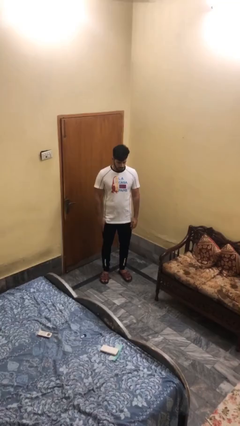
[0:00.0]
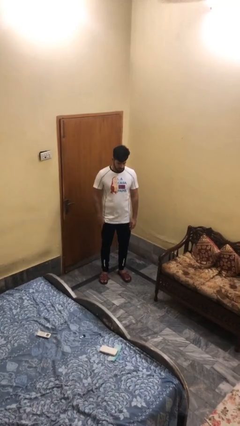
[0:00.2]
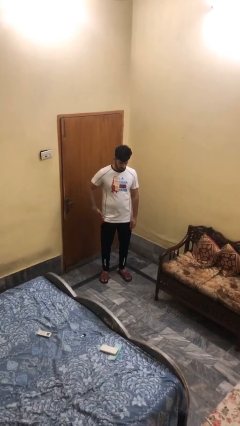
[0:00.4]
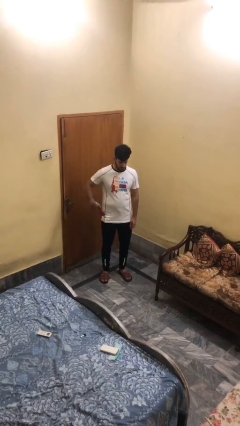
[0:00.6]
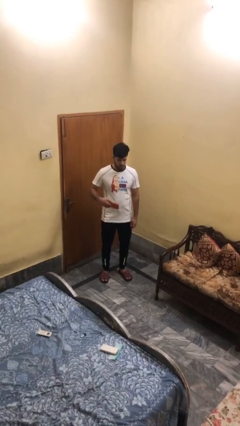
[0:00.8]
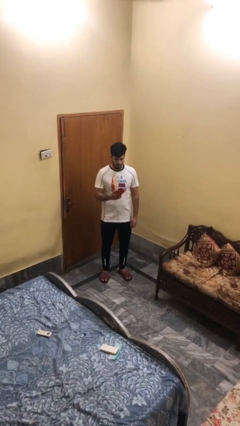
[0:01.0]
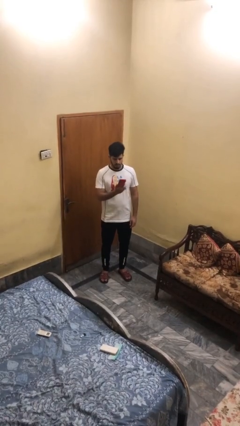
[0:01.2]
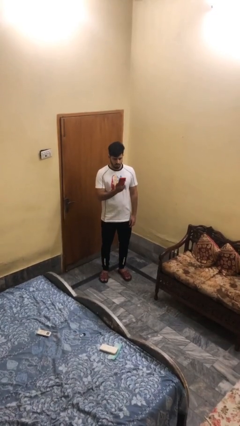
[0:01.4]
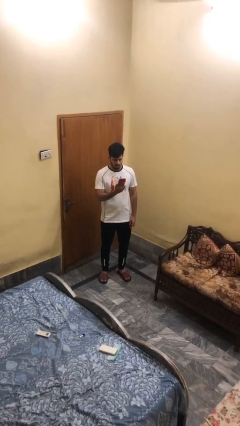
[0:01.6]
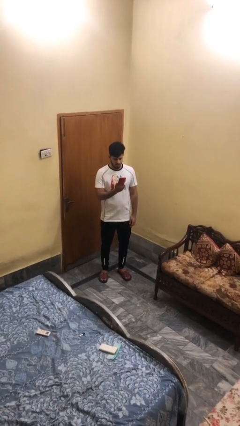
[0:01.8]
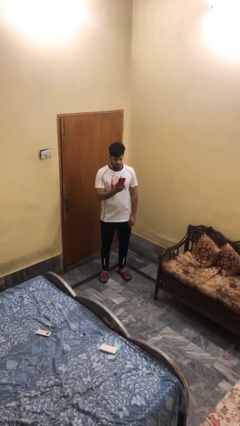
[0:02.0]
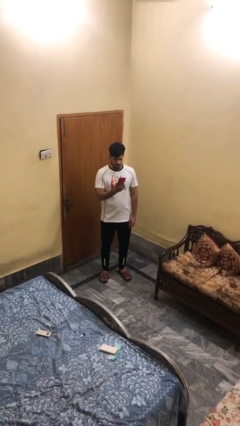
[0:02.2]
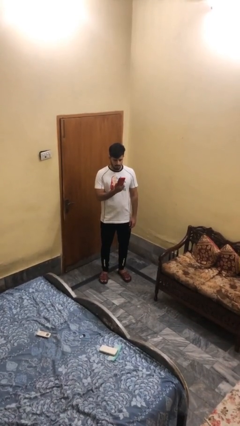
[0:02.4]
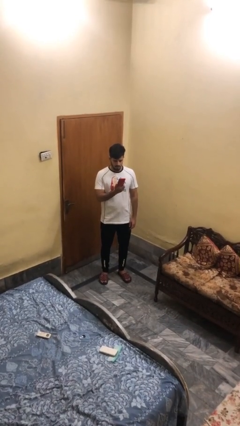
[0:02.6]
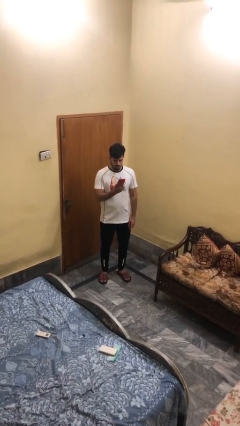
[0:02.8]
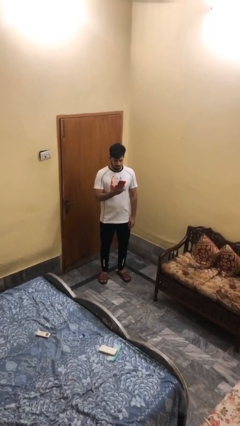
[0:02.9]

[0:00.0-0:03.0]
person takes phone from pocket

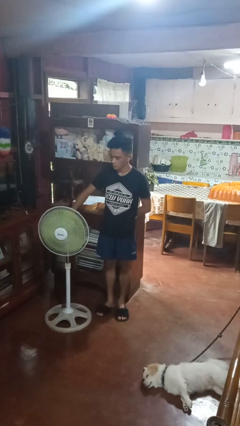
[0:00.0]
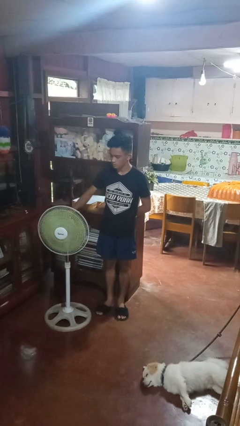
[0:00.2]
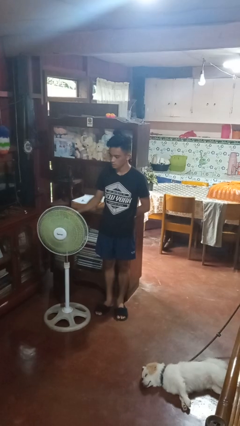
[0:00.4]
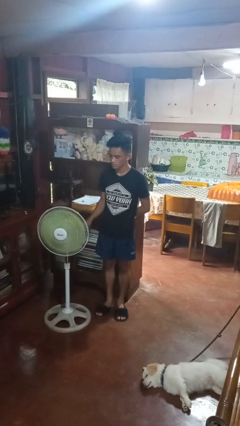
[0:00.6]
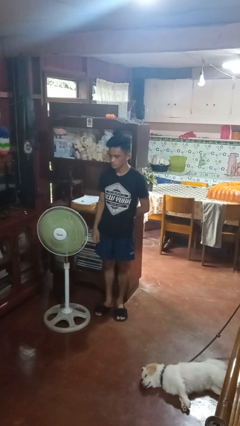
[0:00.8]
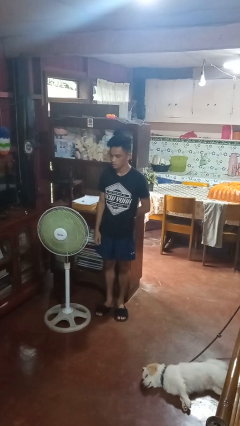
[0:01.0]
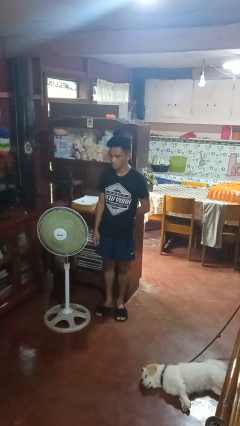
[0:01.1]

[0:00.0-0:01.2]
person turns on fan

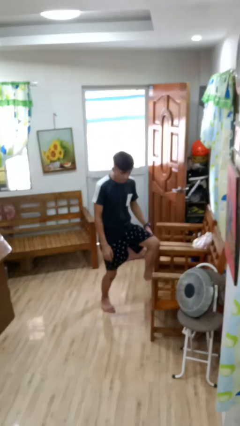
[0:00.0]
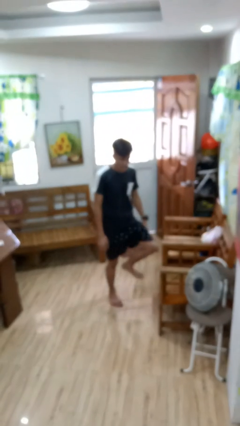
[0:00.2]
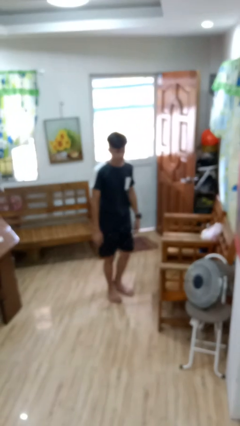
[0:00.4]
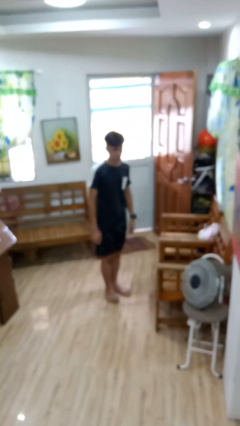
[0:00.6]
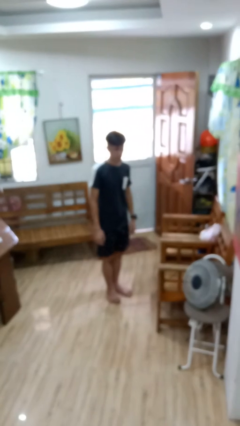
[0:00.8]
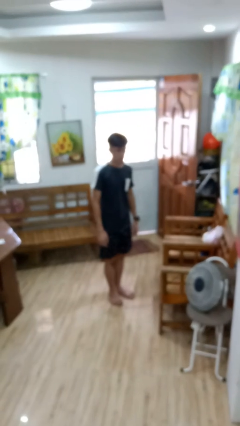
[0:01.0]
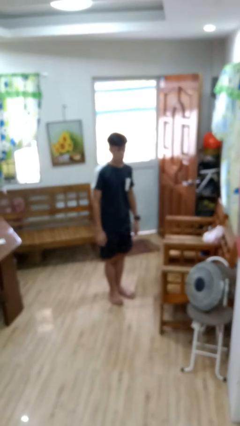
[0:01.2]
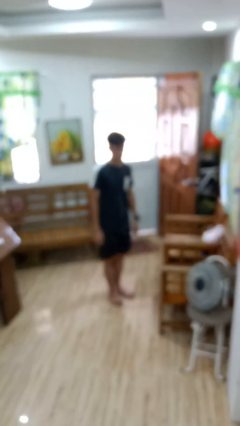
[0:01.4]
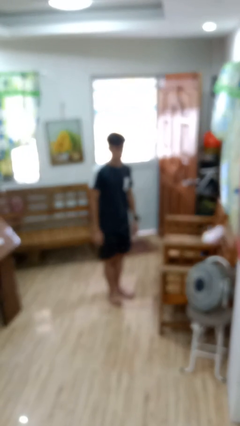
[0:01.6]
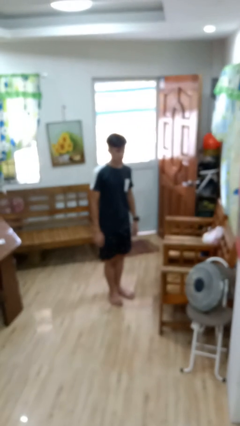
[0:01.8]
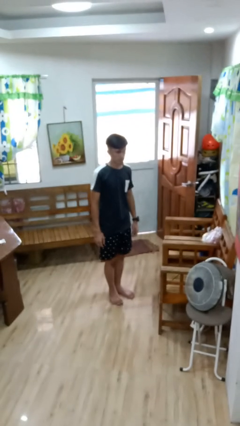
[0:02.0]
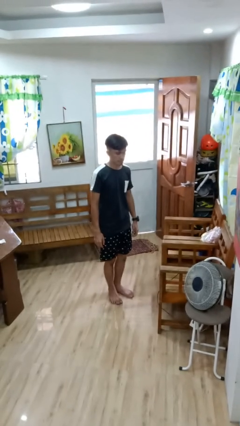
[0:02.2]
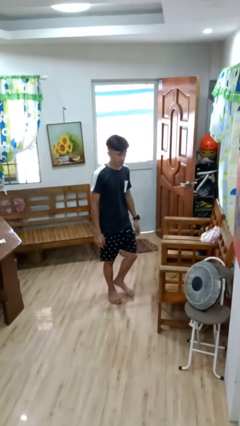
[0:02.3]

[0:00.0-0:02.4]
person climbs off chair

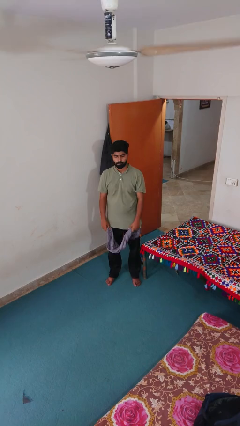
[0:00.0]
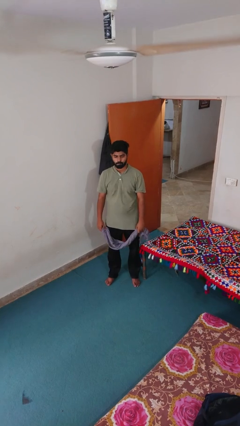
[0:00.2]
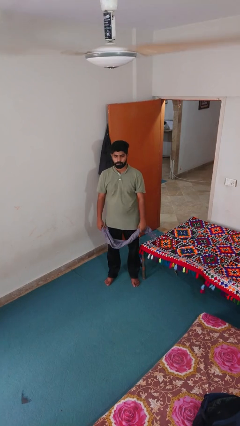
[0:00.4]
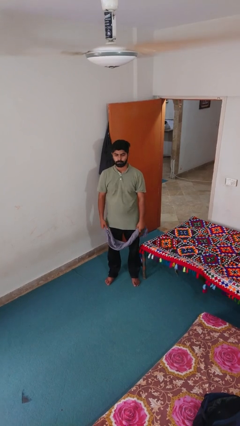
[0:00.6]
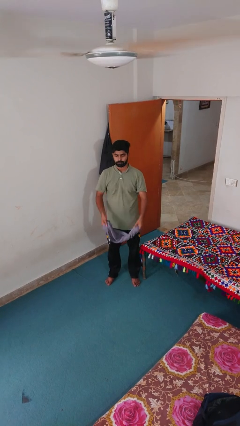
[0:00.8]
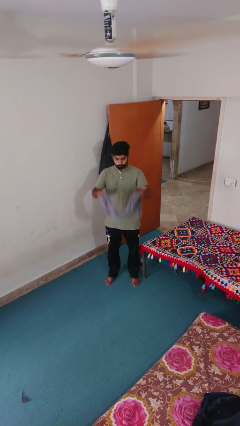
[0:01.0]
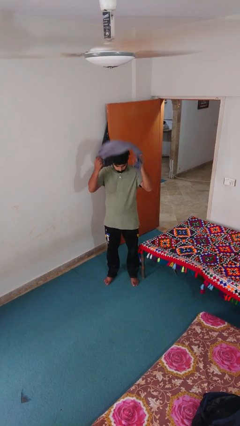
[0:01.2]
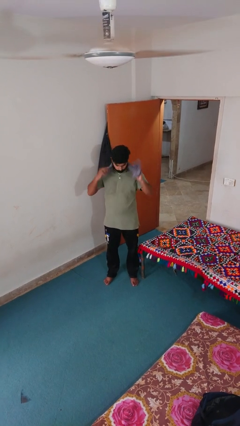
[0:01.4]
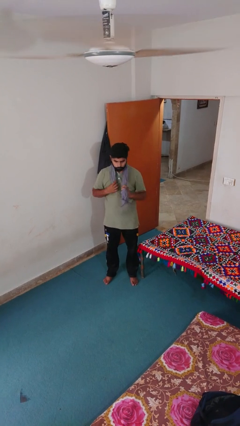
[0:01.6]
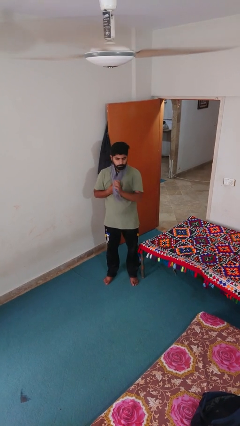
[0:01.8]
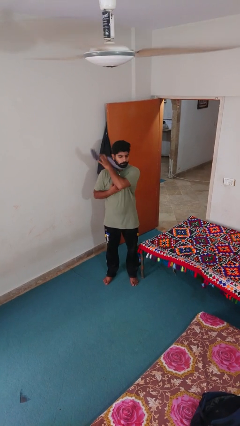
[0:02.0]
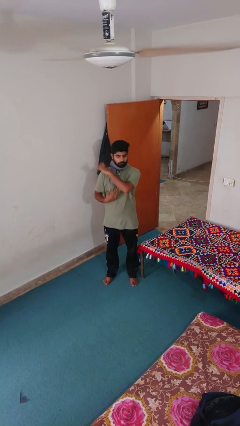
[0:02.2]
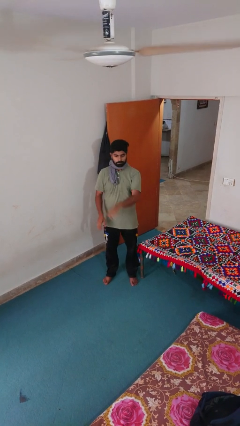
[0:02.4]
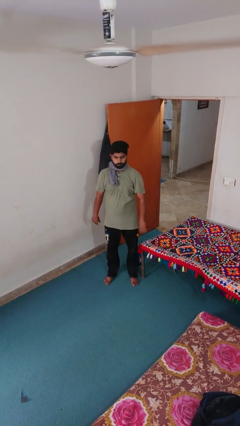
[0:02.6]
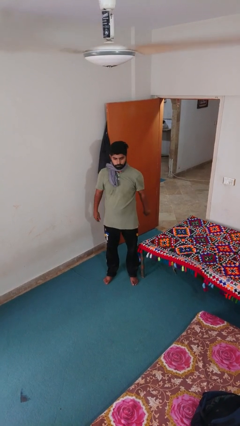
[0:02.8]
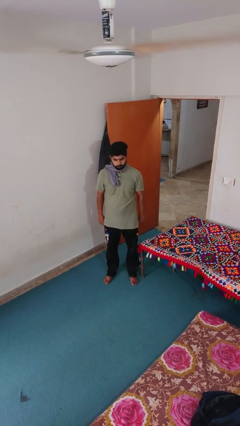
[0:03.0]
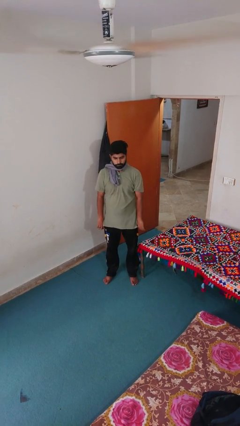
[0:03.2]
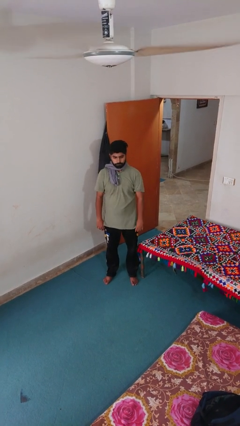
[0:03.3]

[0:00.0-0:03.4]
person puts on scarf

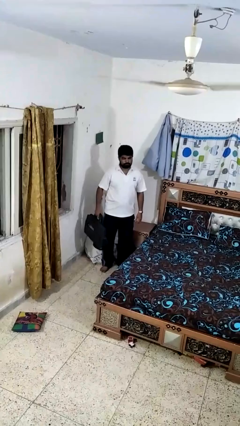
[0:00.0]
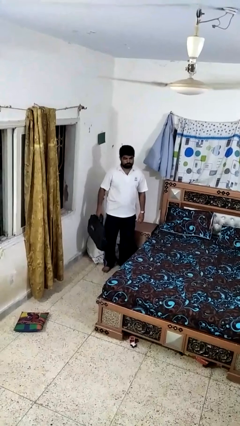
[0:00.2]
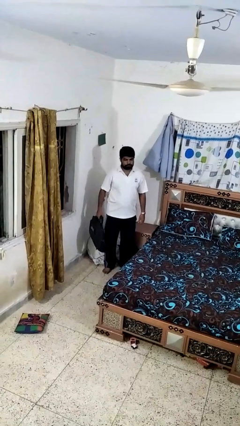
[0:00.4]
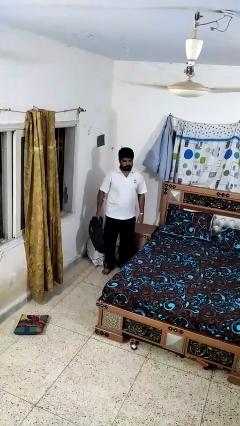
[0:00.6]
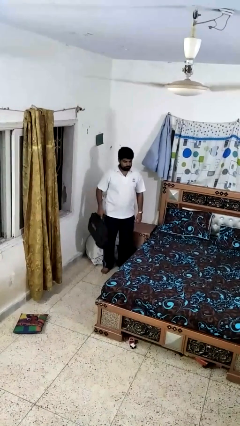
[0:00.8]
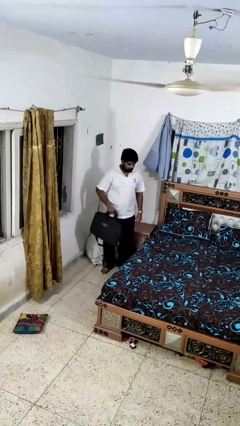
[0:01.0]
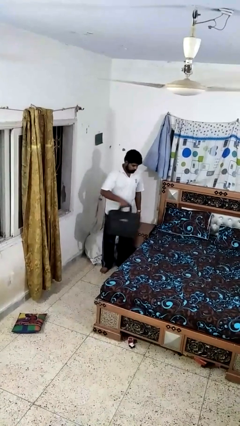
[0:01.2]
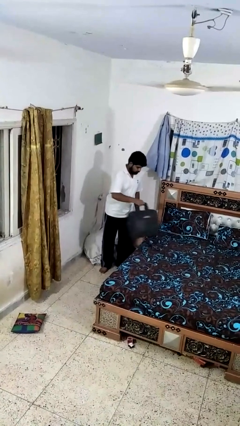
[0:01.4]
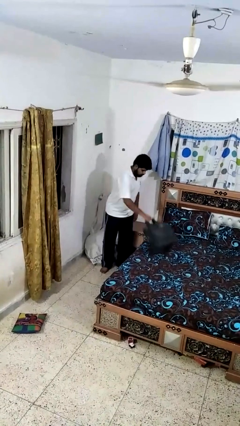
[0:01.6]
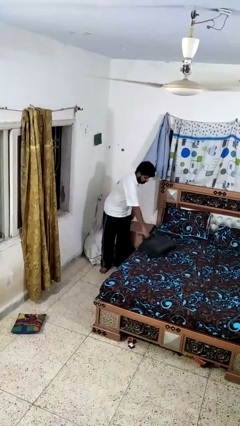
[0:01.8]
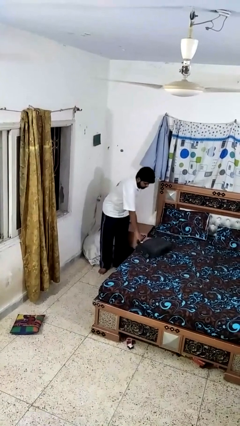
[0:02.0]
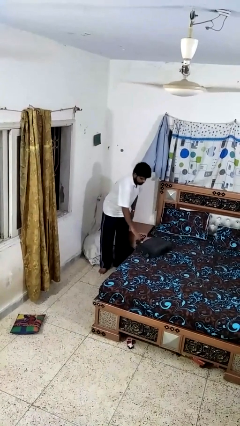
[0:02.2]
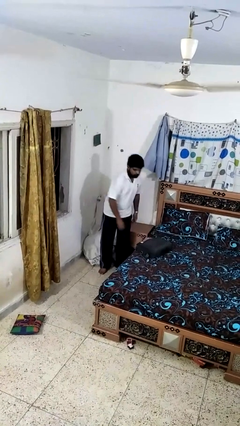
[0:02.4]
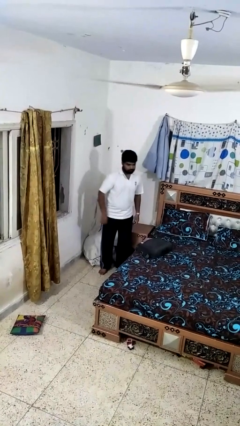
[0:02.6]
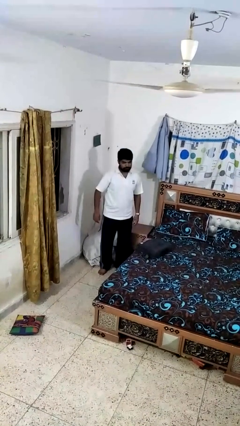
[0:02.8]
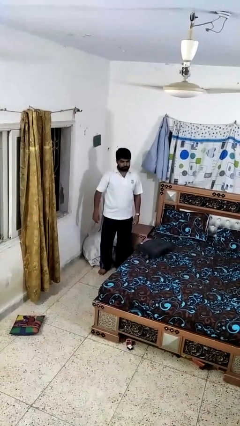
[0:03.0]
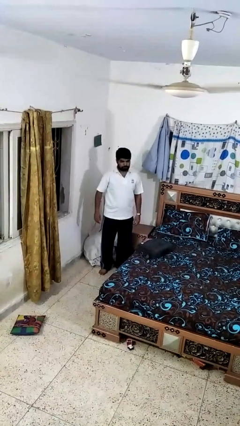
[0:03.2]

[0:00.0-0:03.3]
person puts down object on bed

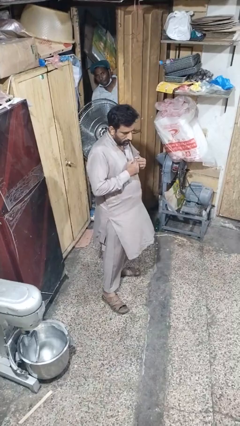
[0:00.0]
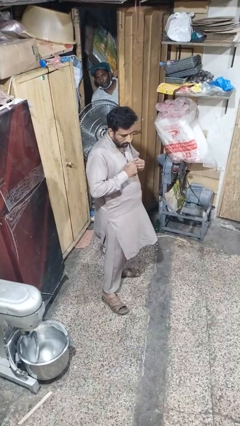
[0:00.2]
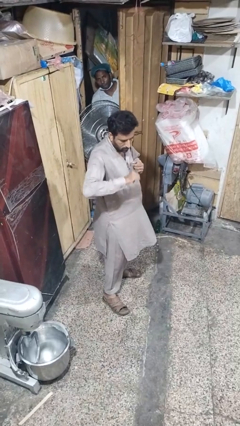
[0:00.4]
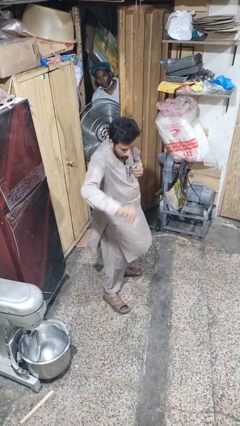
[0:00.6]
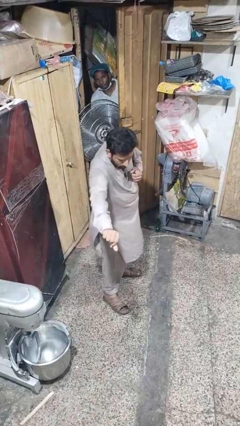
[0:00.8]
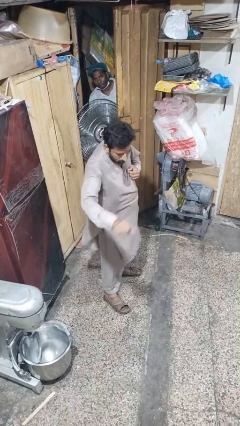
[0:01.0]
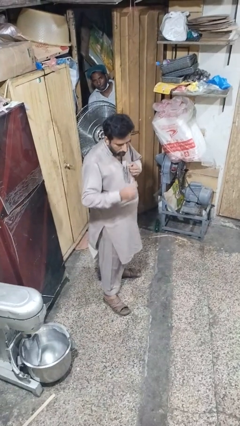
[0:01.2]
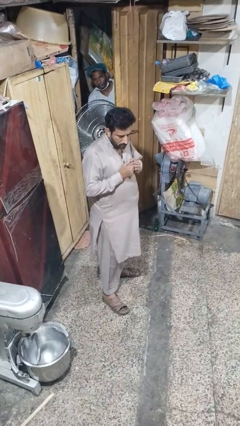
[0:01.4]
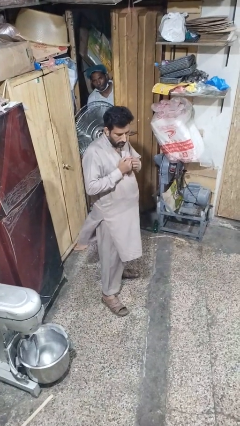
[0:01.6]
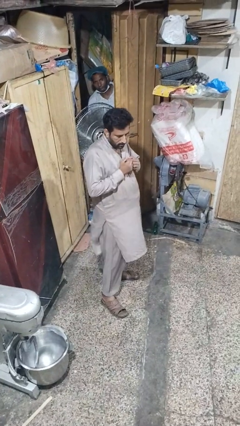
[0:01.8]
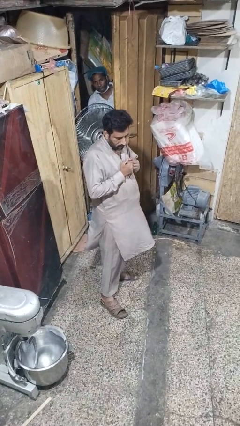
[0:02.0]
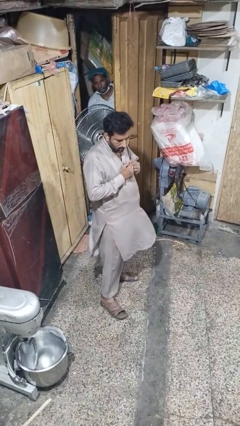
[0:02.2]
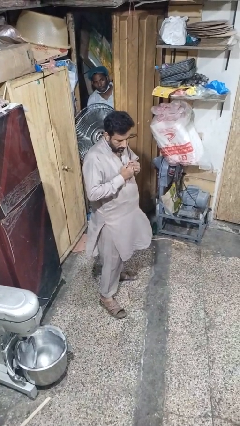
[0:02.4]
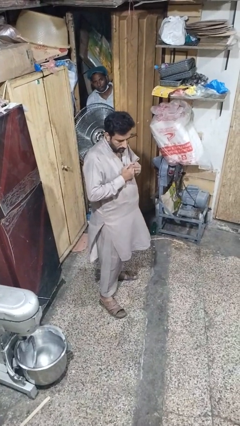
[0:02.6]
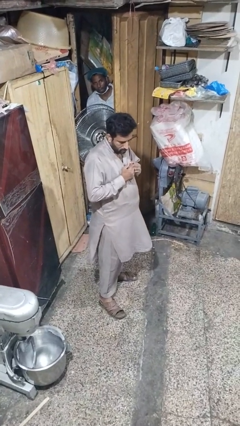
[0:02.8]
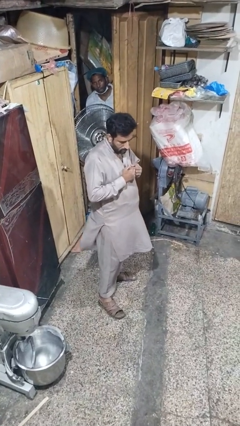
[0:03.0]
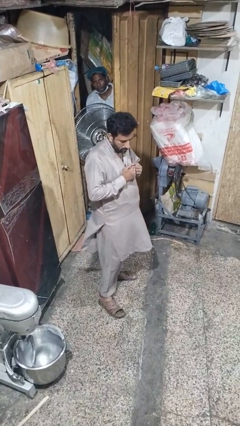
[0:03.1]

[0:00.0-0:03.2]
person karate chop

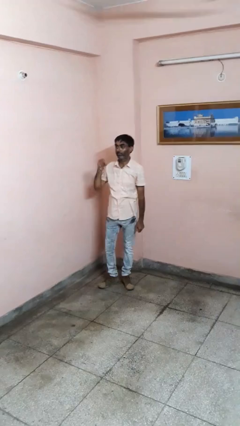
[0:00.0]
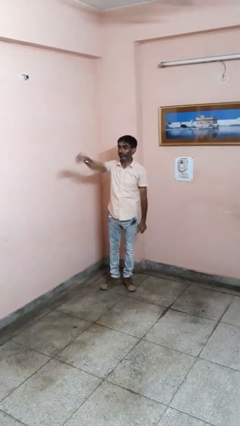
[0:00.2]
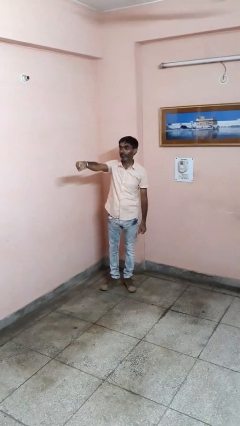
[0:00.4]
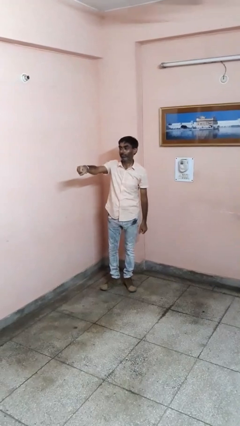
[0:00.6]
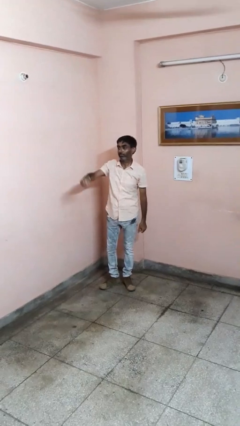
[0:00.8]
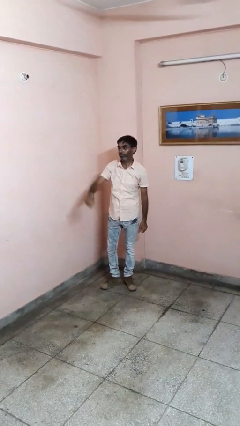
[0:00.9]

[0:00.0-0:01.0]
person punches
